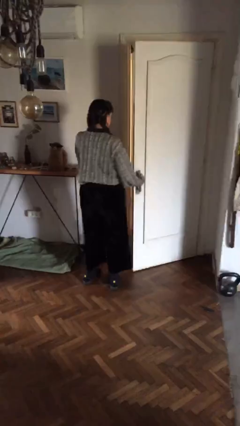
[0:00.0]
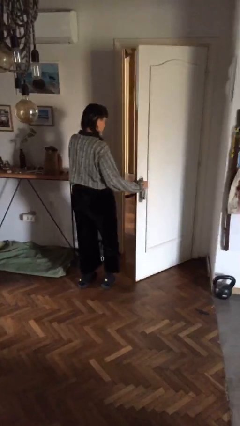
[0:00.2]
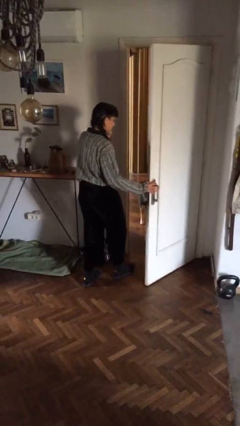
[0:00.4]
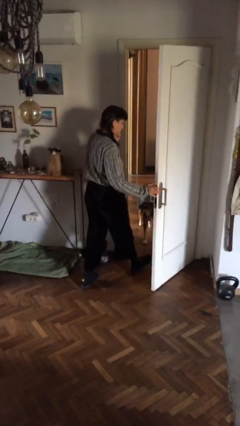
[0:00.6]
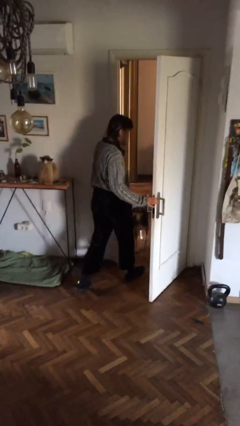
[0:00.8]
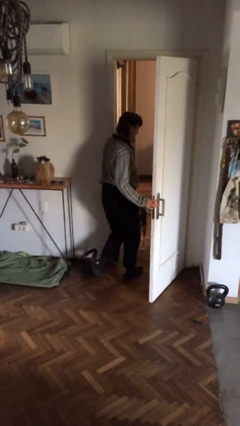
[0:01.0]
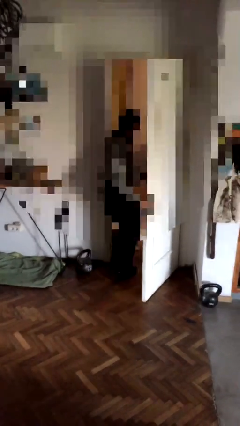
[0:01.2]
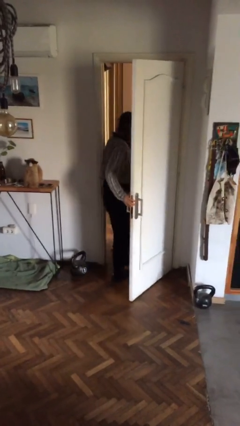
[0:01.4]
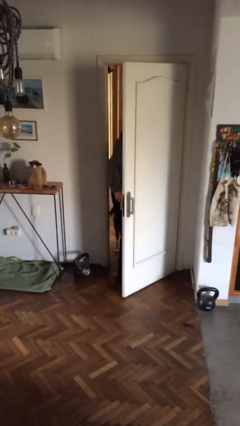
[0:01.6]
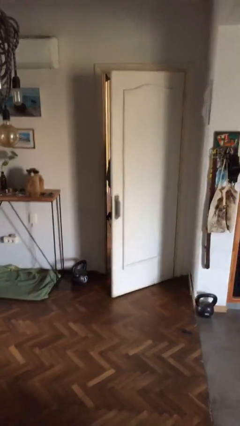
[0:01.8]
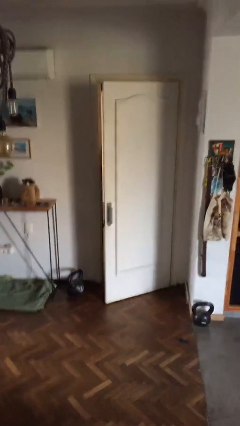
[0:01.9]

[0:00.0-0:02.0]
person exits scene through structure

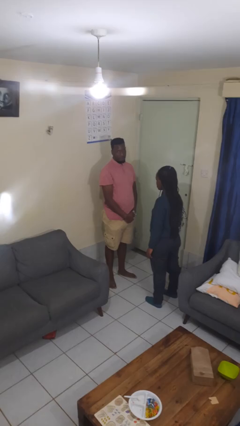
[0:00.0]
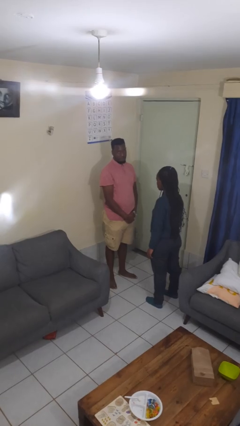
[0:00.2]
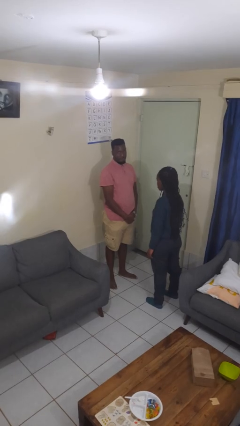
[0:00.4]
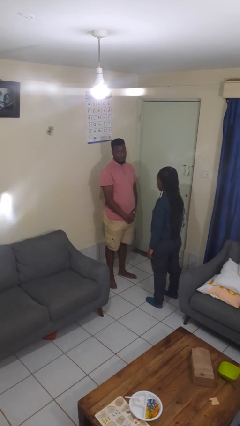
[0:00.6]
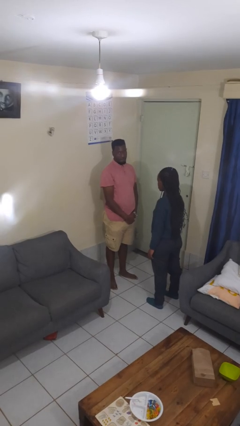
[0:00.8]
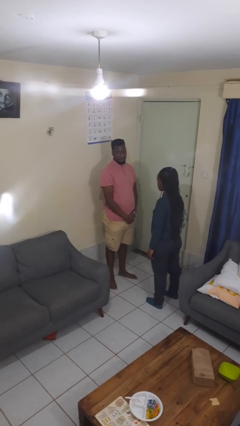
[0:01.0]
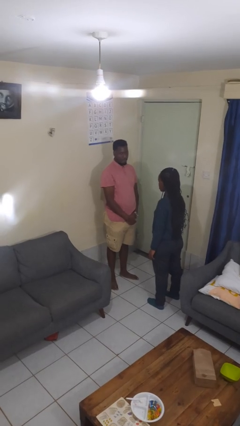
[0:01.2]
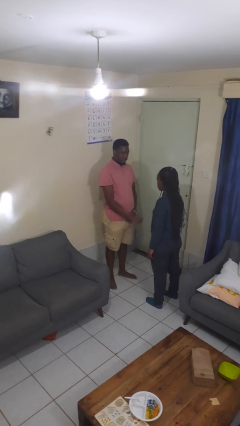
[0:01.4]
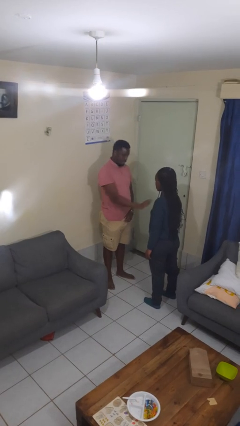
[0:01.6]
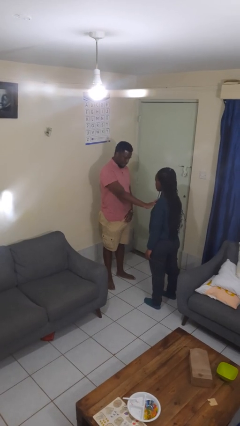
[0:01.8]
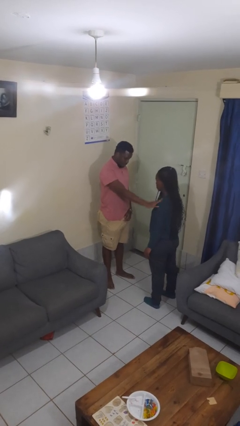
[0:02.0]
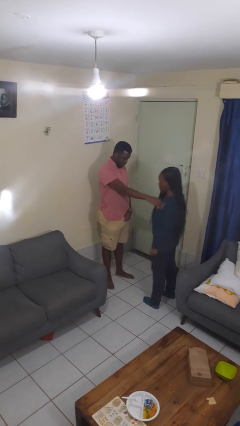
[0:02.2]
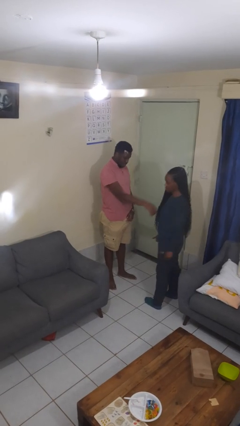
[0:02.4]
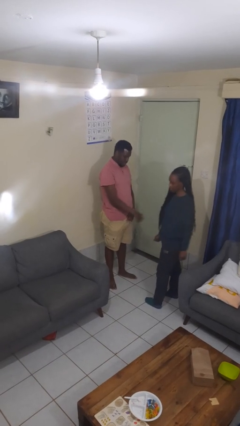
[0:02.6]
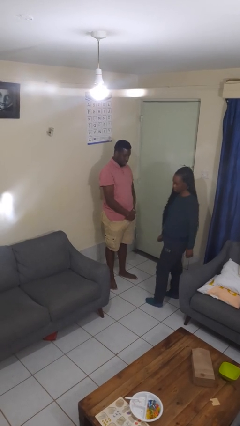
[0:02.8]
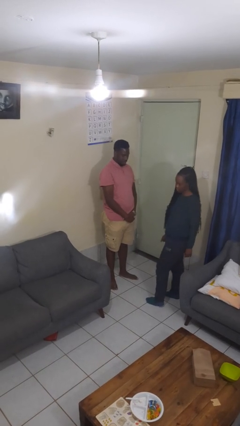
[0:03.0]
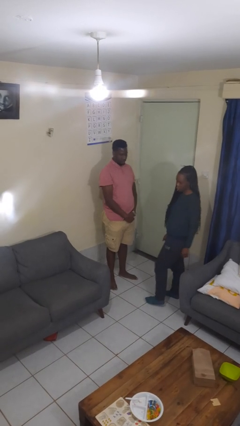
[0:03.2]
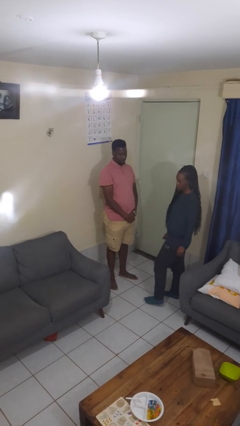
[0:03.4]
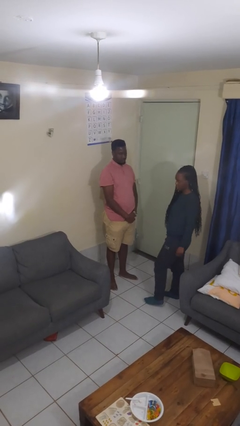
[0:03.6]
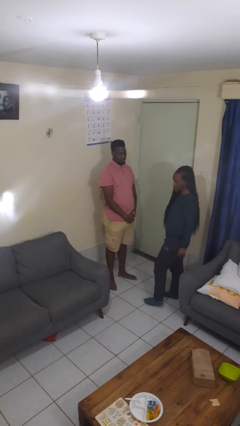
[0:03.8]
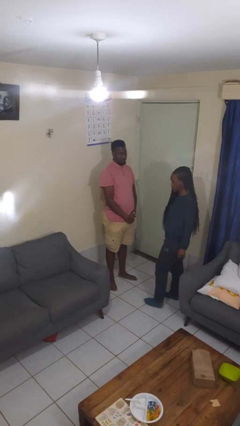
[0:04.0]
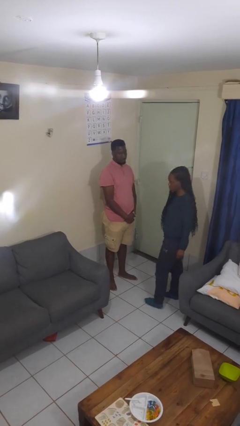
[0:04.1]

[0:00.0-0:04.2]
person shoves person

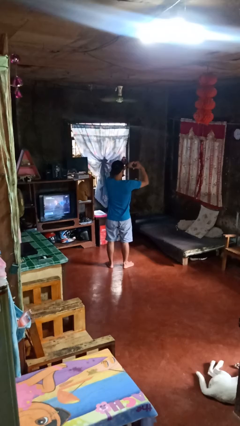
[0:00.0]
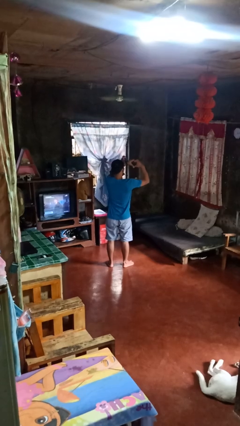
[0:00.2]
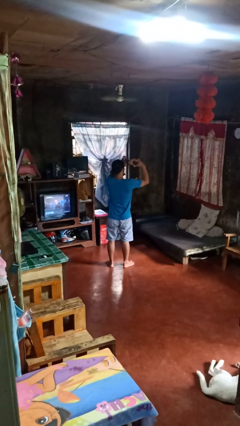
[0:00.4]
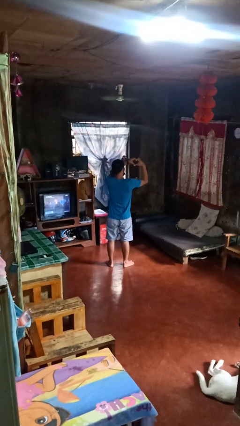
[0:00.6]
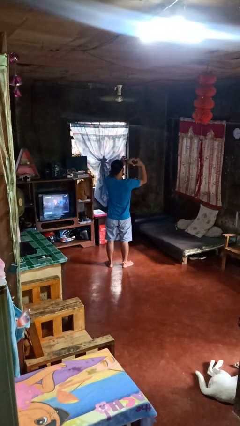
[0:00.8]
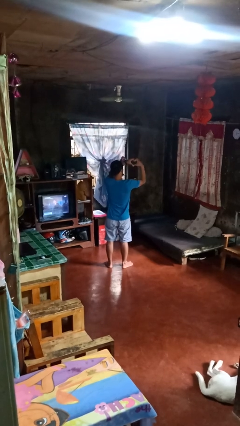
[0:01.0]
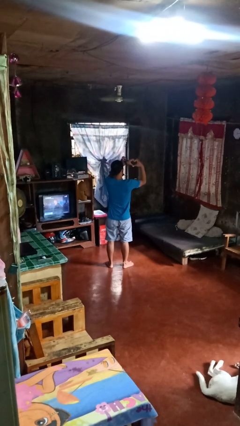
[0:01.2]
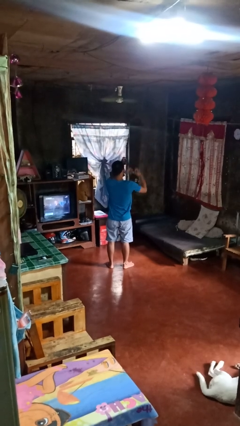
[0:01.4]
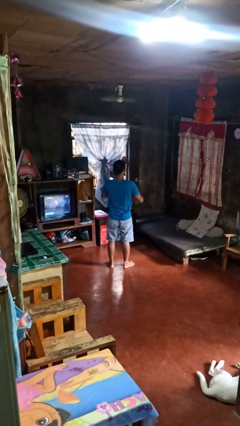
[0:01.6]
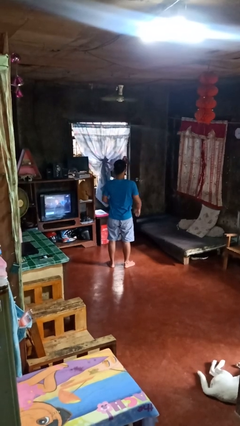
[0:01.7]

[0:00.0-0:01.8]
person gestures heart

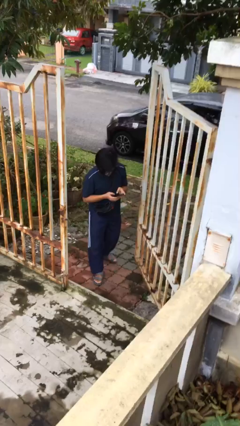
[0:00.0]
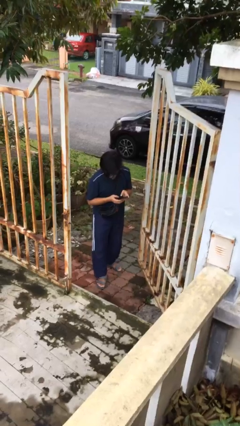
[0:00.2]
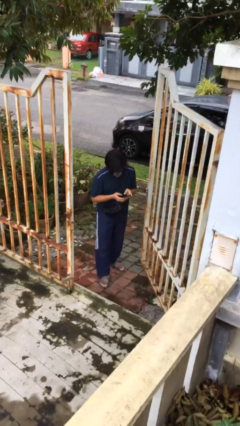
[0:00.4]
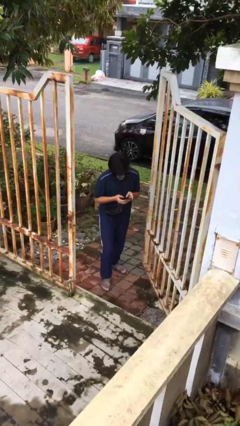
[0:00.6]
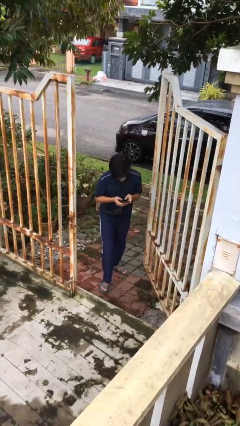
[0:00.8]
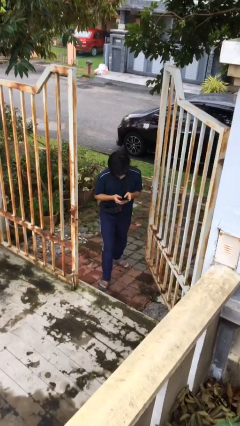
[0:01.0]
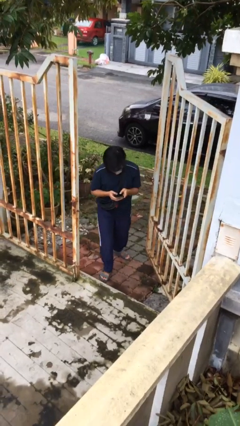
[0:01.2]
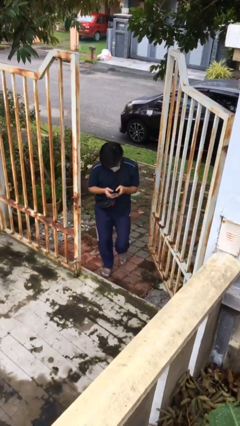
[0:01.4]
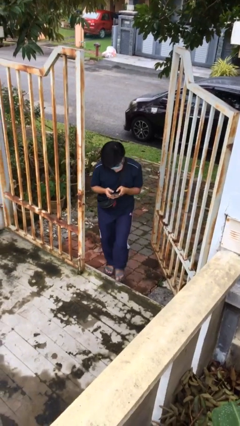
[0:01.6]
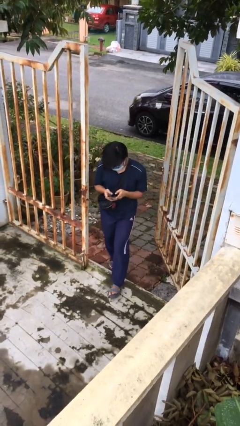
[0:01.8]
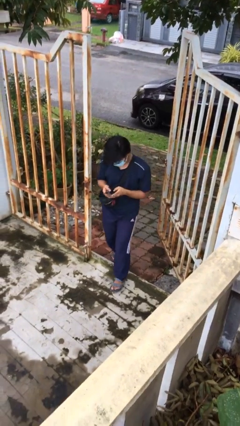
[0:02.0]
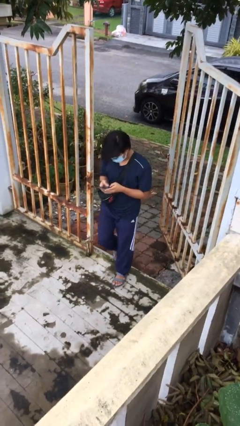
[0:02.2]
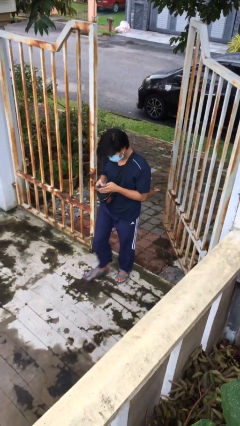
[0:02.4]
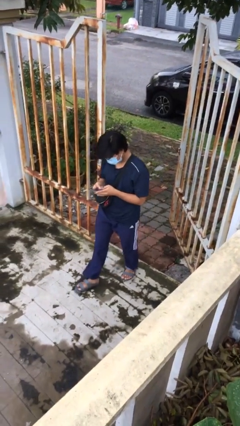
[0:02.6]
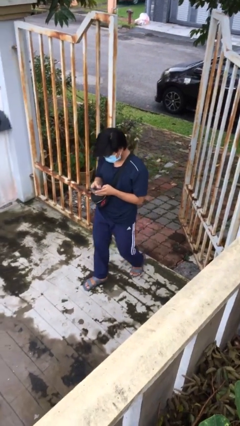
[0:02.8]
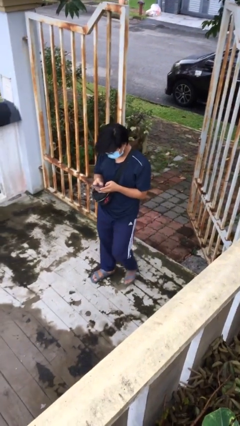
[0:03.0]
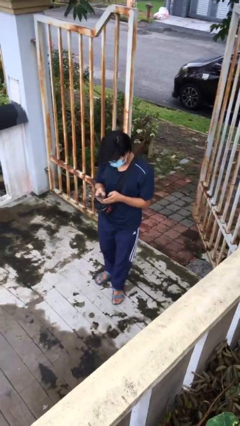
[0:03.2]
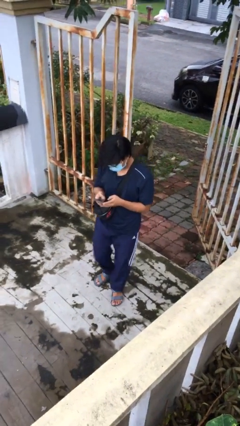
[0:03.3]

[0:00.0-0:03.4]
person enters scene through structure

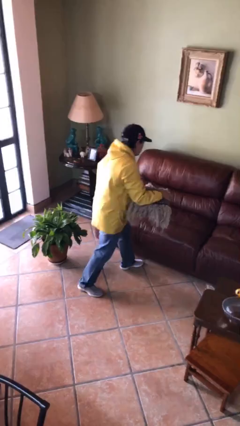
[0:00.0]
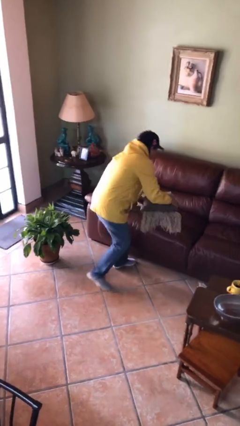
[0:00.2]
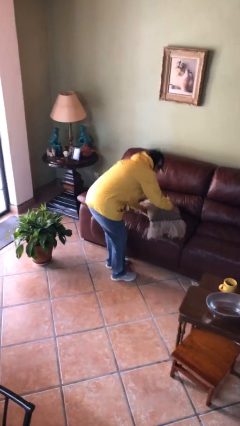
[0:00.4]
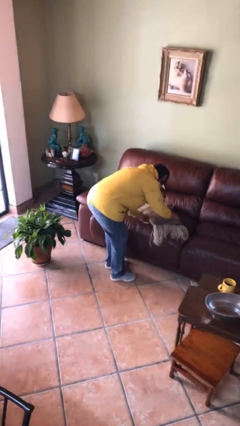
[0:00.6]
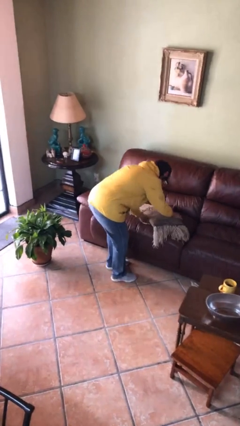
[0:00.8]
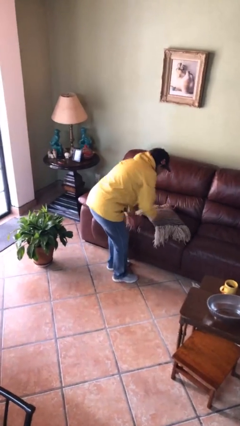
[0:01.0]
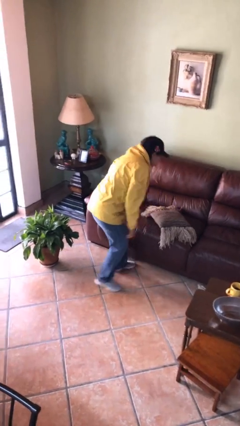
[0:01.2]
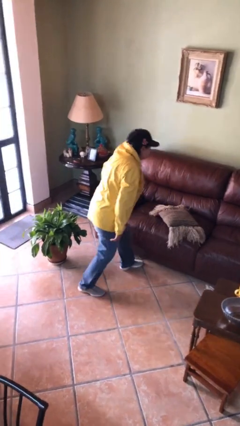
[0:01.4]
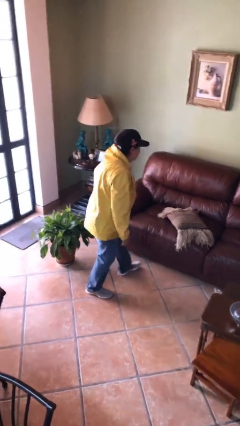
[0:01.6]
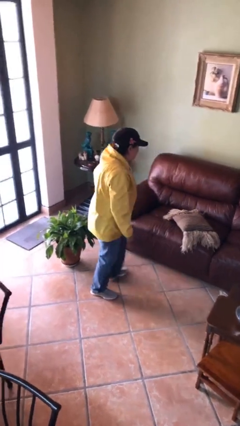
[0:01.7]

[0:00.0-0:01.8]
person puts down object on couch

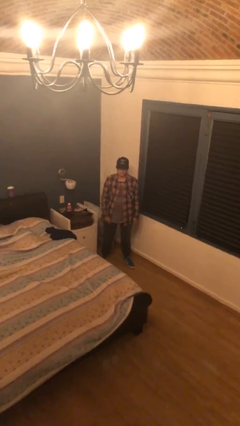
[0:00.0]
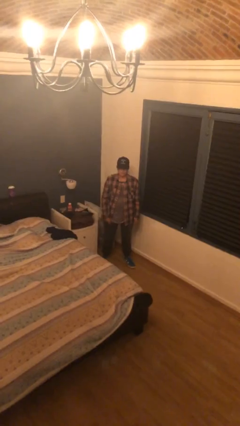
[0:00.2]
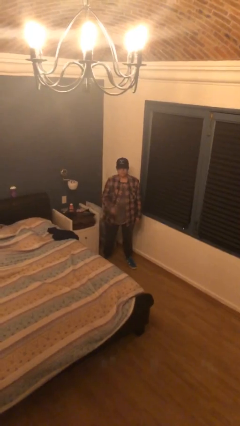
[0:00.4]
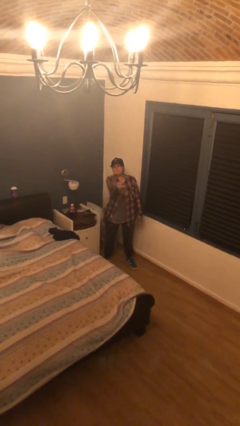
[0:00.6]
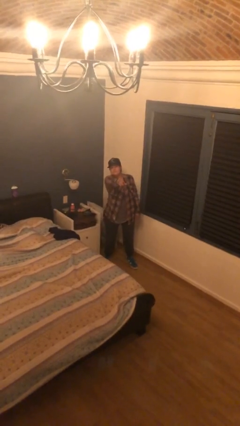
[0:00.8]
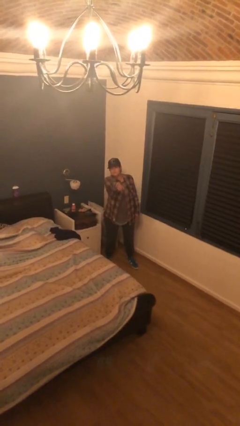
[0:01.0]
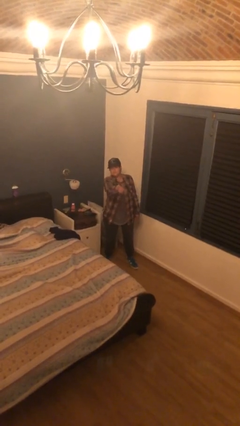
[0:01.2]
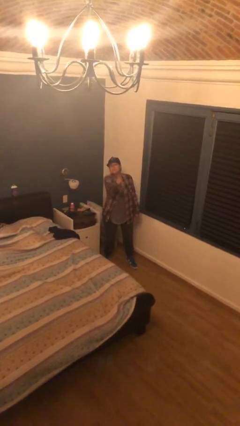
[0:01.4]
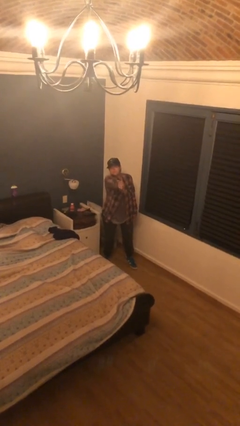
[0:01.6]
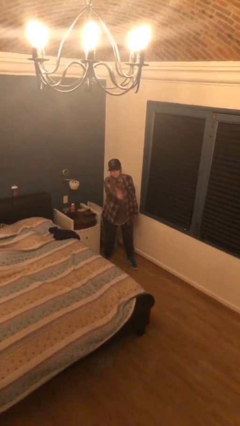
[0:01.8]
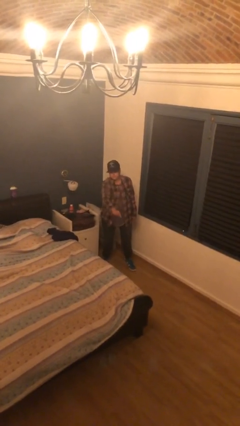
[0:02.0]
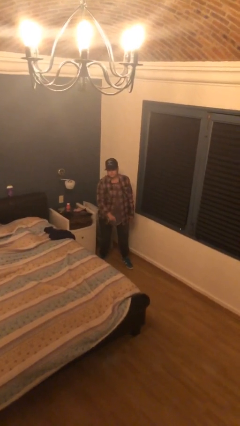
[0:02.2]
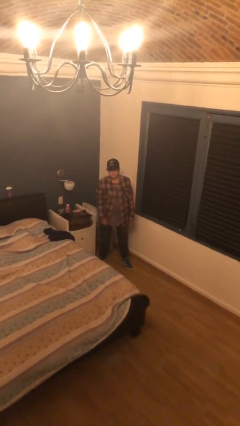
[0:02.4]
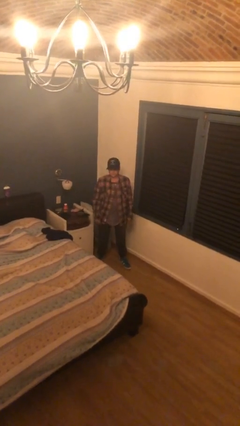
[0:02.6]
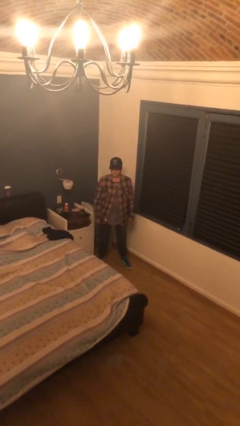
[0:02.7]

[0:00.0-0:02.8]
person points at person

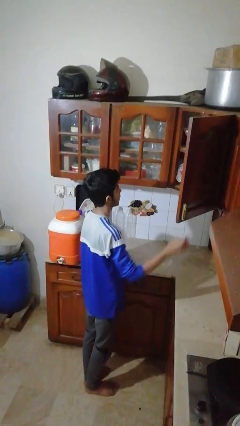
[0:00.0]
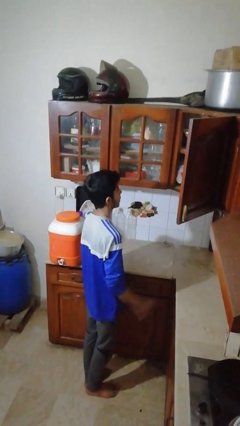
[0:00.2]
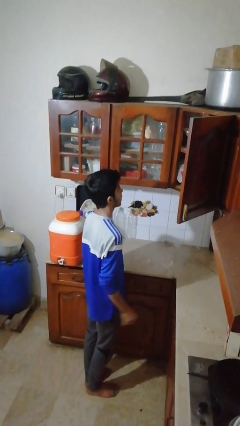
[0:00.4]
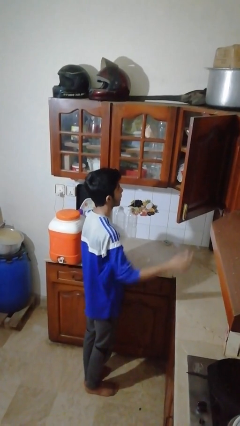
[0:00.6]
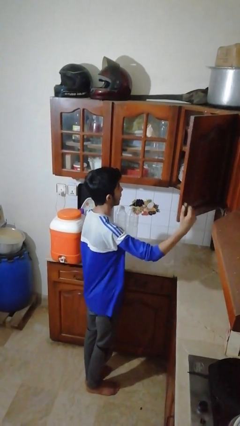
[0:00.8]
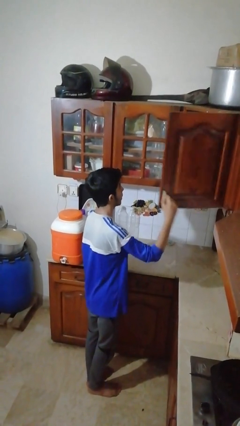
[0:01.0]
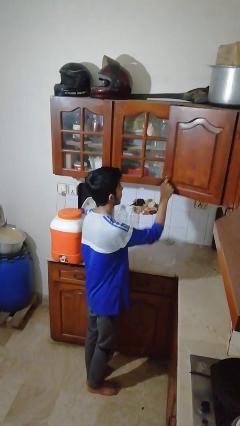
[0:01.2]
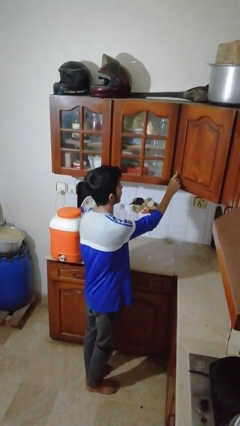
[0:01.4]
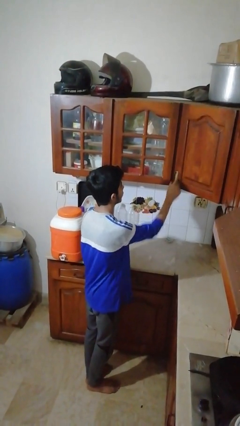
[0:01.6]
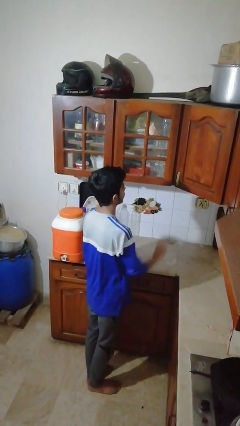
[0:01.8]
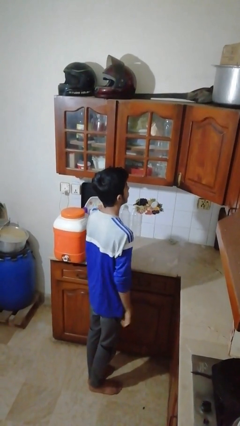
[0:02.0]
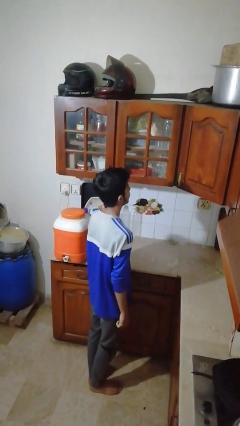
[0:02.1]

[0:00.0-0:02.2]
person closes cabinet
